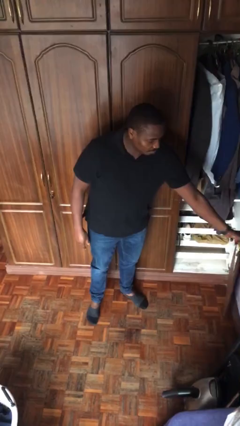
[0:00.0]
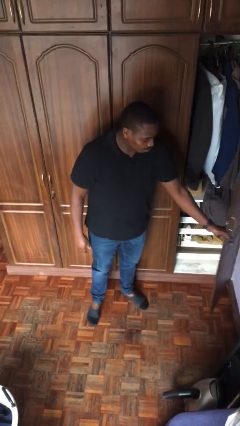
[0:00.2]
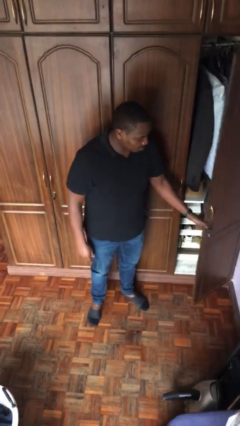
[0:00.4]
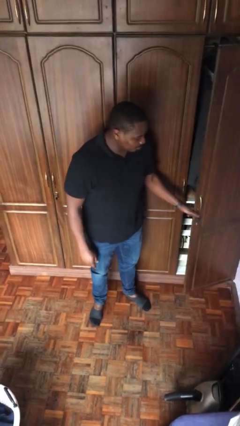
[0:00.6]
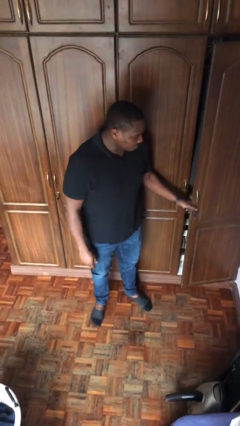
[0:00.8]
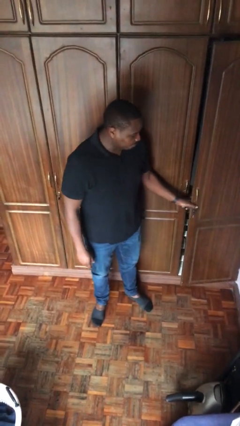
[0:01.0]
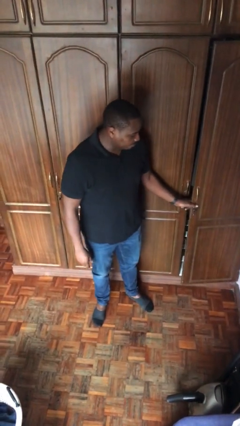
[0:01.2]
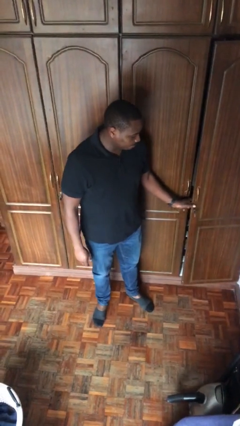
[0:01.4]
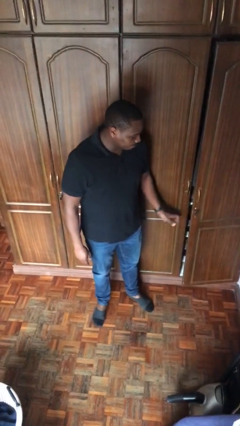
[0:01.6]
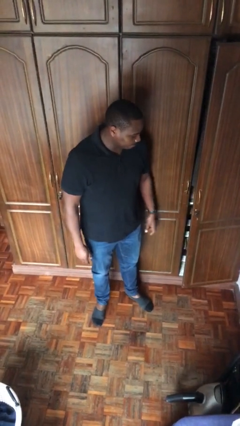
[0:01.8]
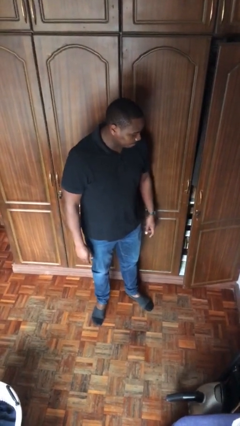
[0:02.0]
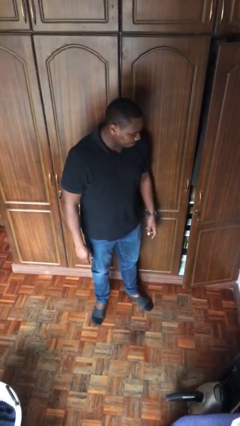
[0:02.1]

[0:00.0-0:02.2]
person closes closet door

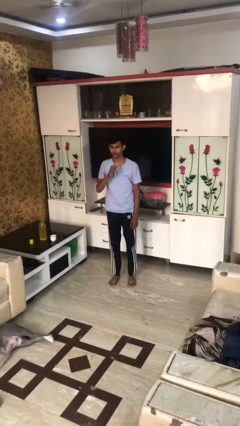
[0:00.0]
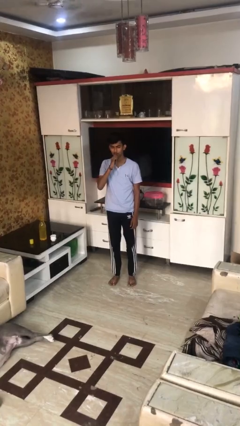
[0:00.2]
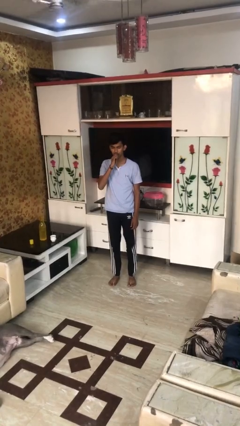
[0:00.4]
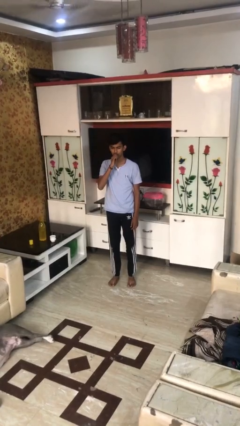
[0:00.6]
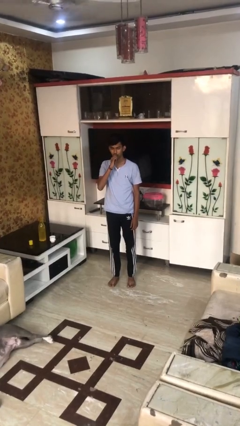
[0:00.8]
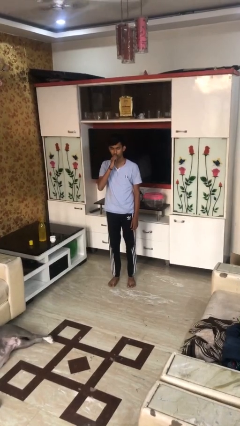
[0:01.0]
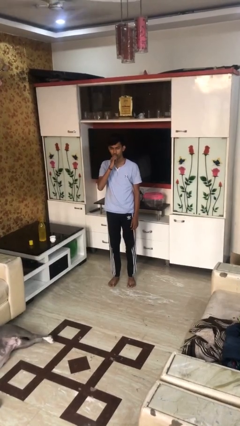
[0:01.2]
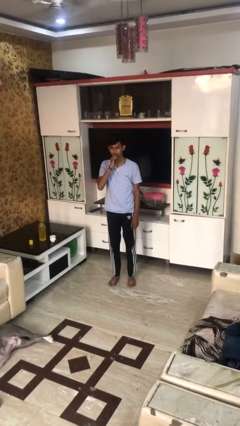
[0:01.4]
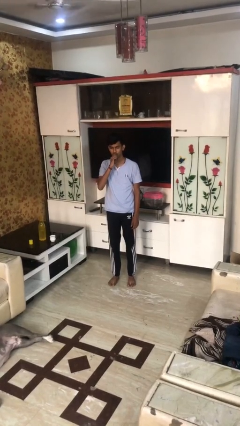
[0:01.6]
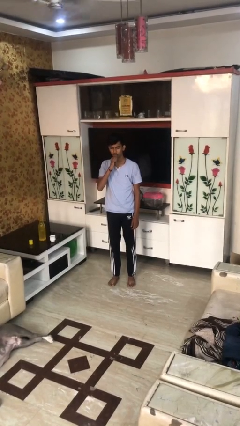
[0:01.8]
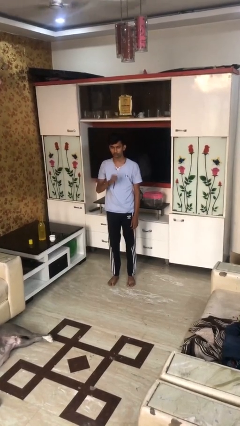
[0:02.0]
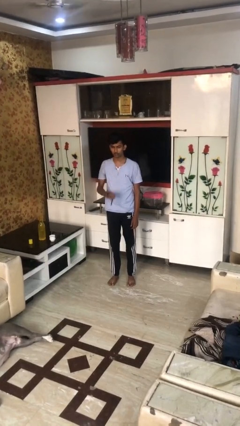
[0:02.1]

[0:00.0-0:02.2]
person vapes

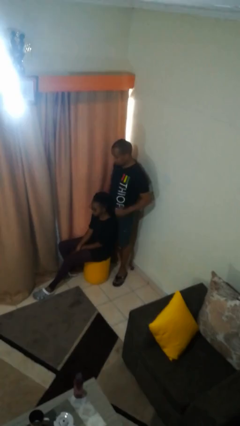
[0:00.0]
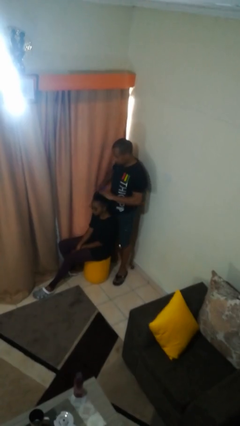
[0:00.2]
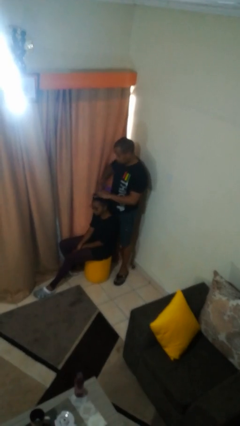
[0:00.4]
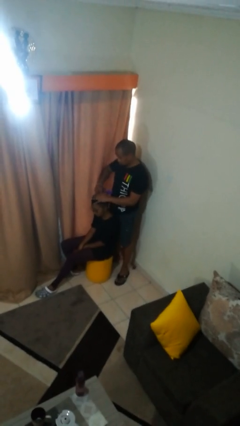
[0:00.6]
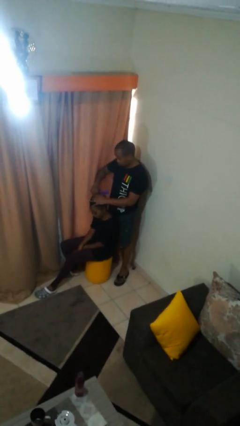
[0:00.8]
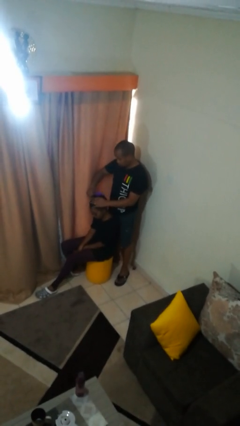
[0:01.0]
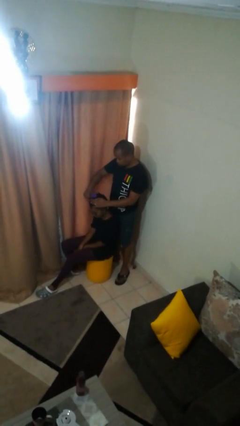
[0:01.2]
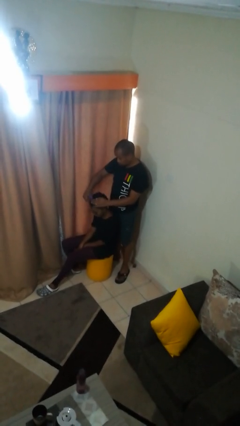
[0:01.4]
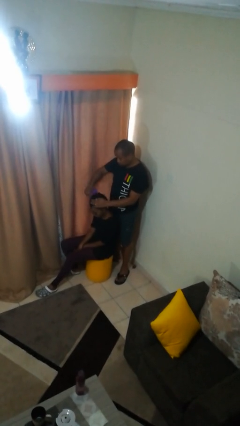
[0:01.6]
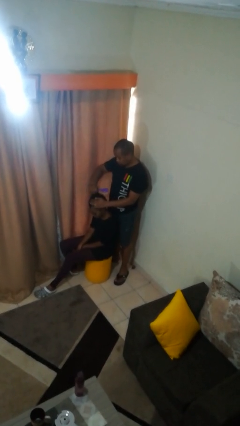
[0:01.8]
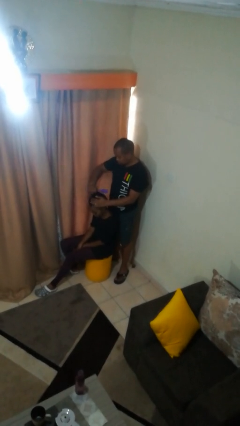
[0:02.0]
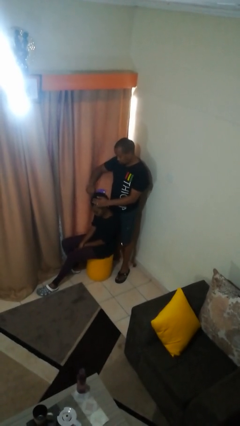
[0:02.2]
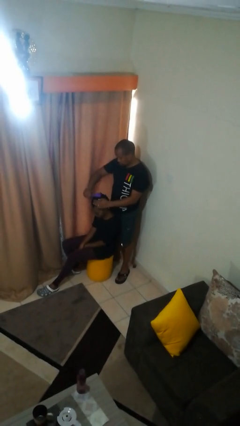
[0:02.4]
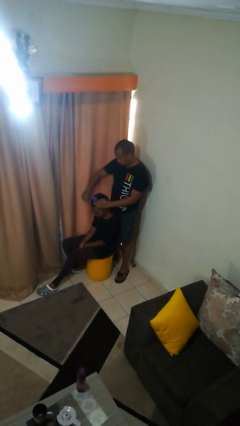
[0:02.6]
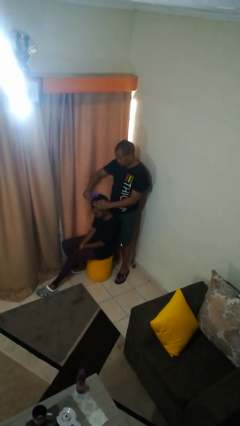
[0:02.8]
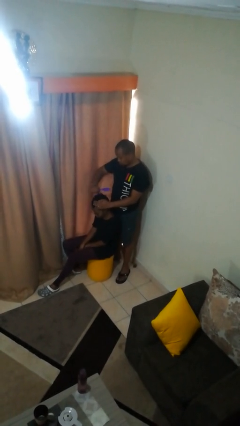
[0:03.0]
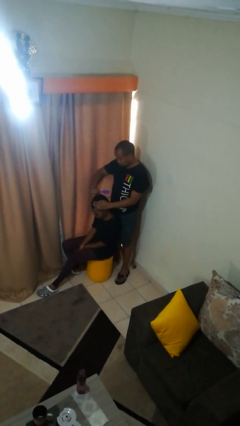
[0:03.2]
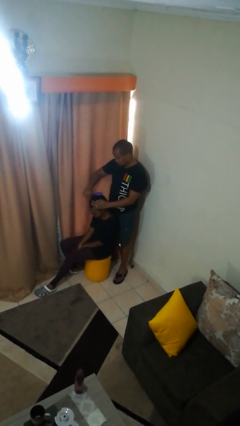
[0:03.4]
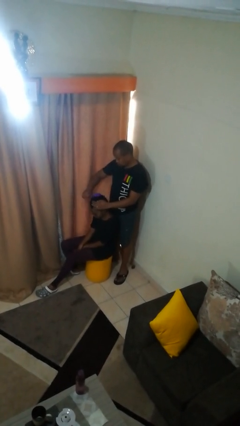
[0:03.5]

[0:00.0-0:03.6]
person brushes hair of person

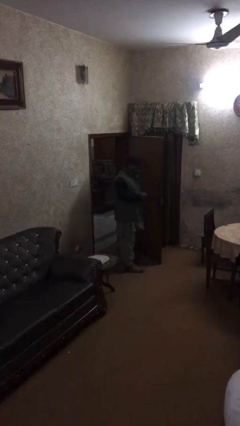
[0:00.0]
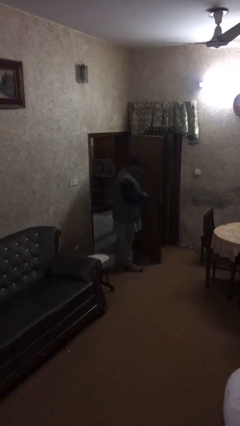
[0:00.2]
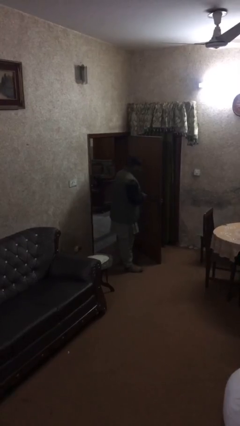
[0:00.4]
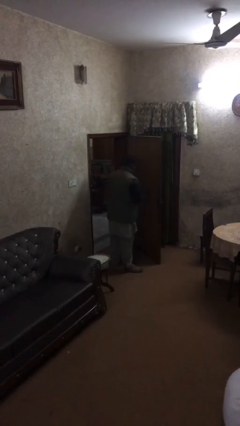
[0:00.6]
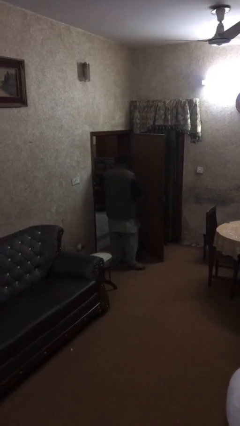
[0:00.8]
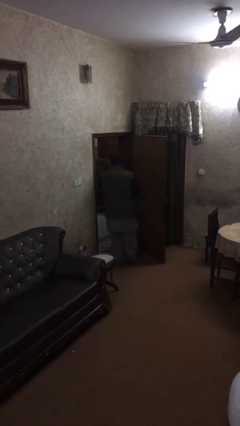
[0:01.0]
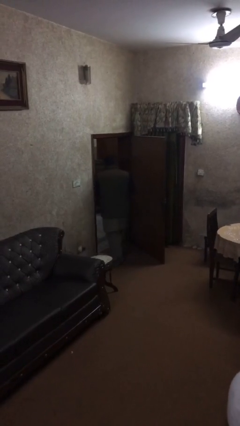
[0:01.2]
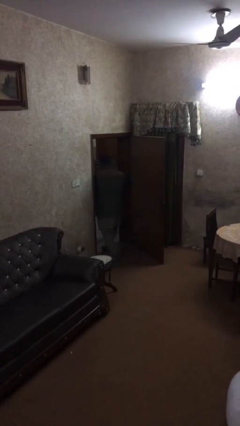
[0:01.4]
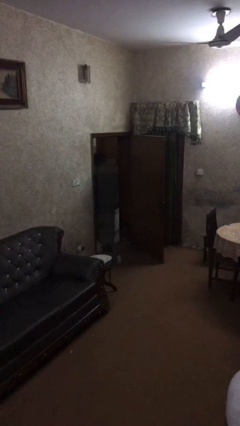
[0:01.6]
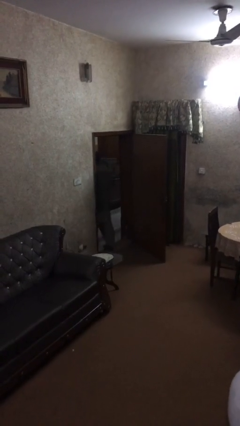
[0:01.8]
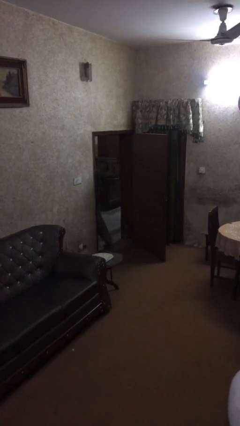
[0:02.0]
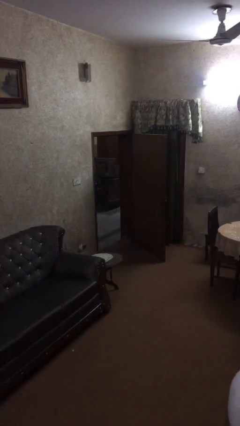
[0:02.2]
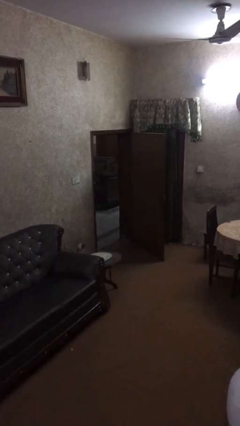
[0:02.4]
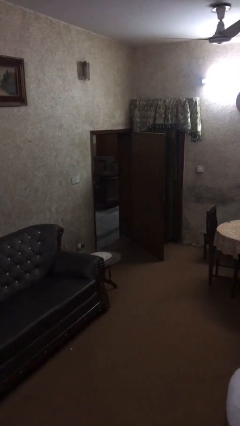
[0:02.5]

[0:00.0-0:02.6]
person exits scene through structure

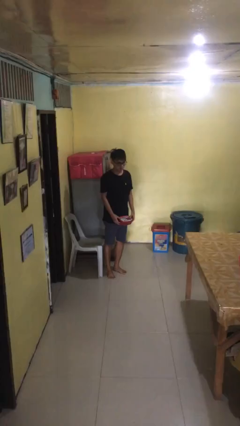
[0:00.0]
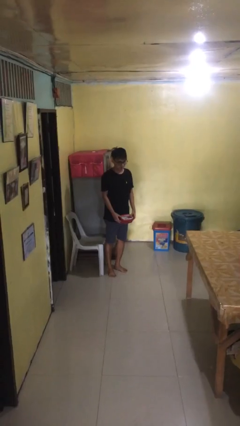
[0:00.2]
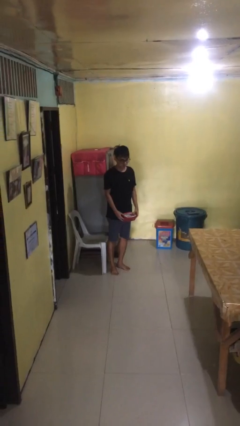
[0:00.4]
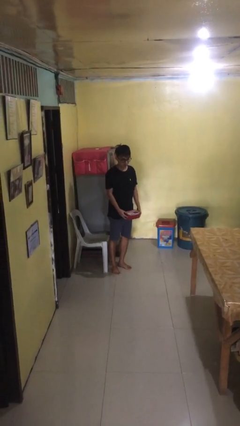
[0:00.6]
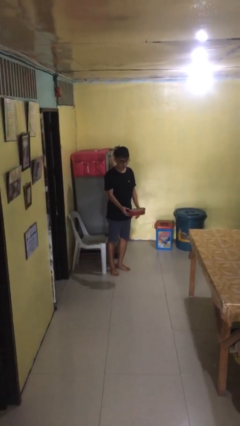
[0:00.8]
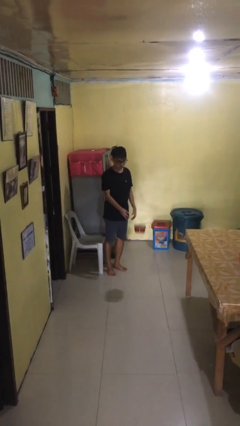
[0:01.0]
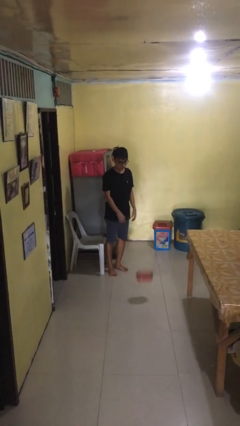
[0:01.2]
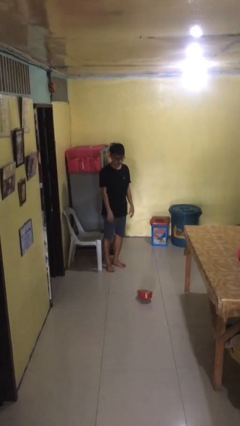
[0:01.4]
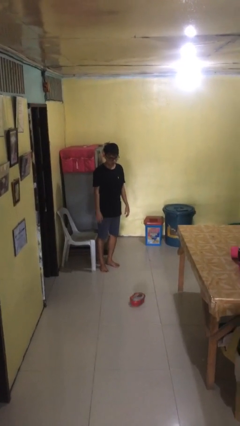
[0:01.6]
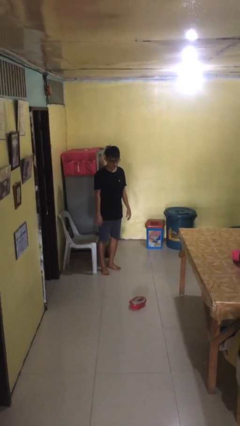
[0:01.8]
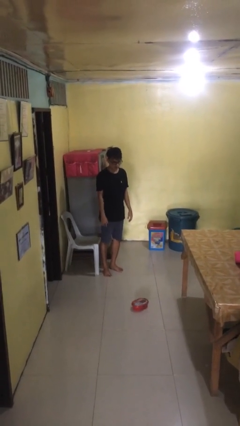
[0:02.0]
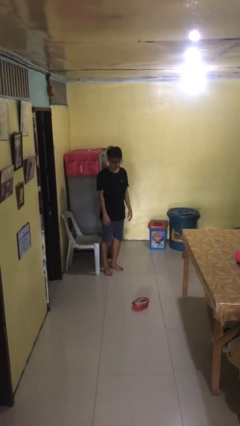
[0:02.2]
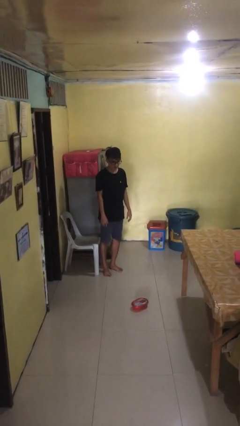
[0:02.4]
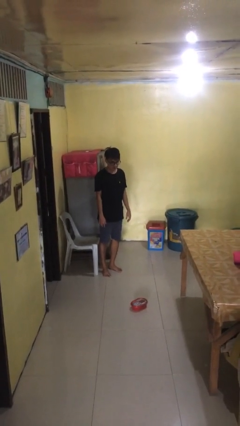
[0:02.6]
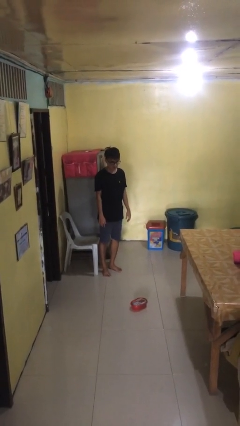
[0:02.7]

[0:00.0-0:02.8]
person throws object to ground

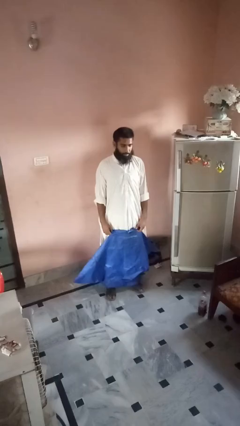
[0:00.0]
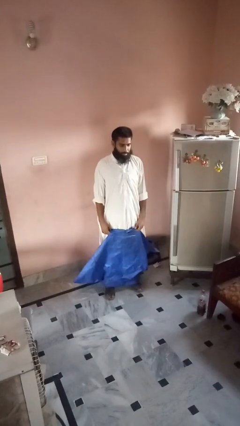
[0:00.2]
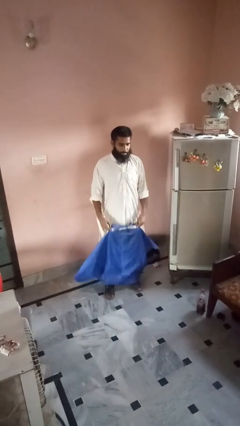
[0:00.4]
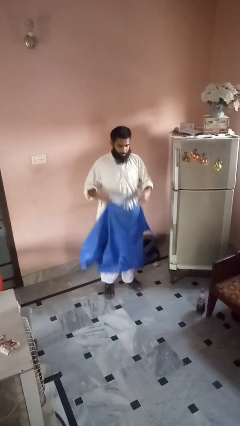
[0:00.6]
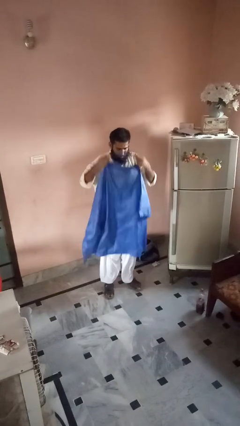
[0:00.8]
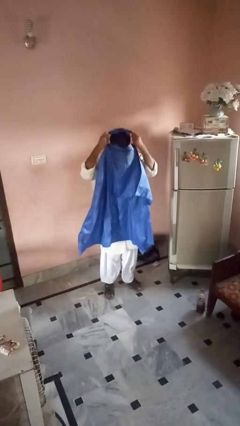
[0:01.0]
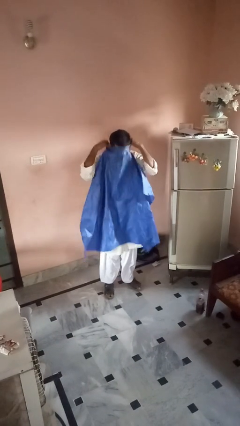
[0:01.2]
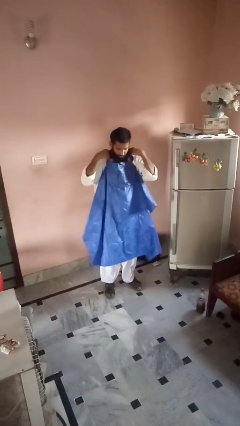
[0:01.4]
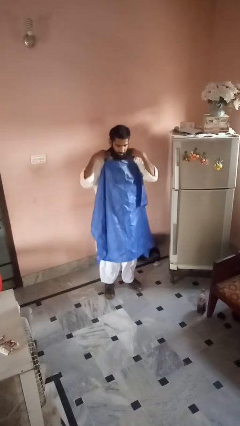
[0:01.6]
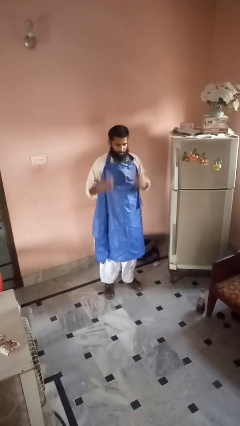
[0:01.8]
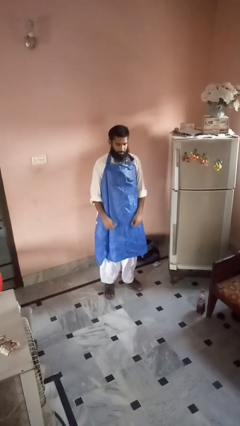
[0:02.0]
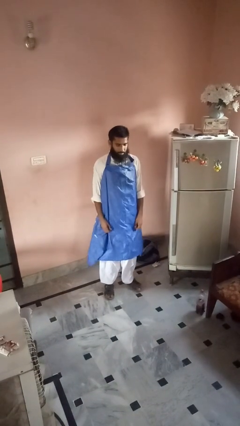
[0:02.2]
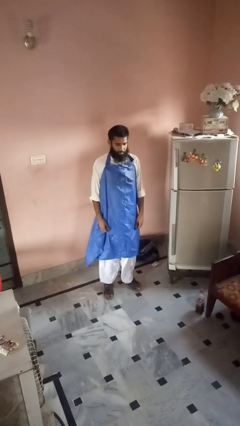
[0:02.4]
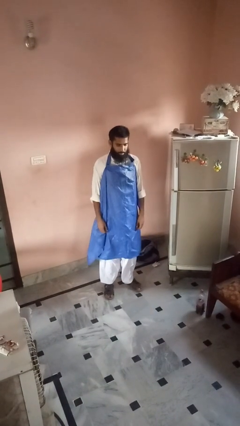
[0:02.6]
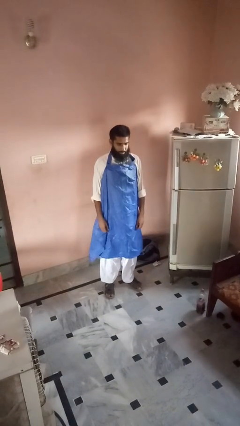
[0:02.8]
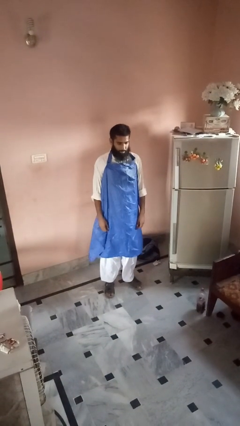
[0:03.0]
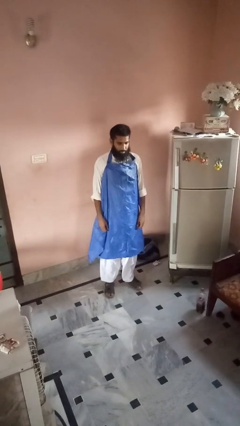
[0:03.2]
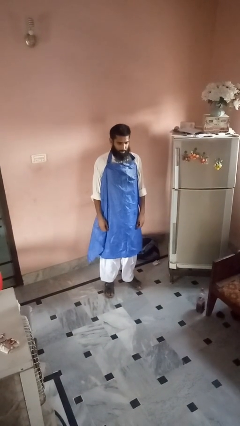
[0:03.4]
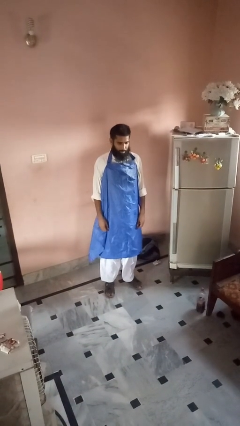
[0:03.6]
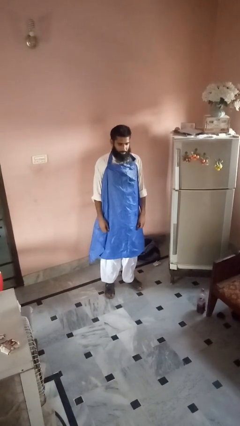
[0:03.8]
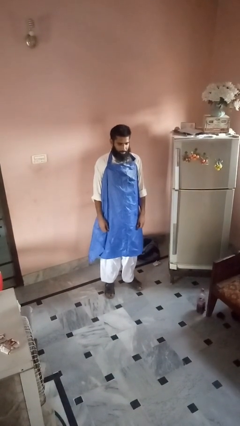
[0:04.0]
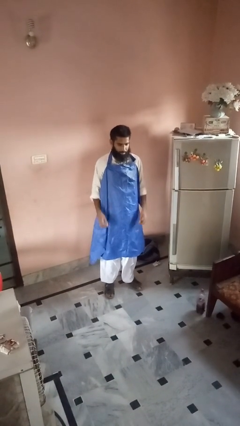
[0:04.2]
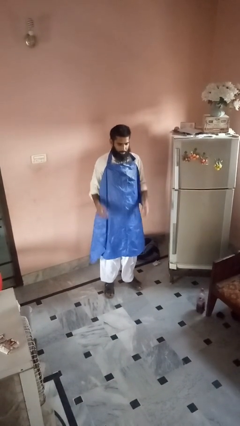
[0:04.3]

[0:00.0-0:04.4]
person puts on apron
